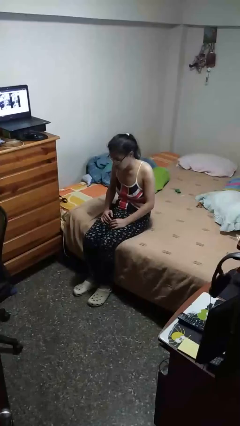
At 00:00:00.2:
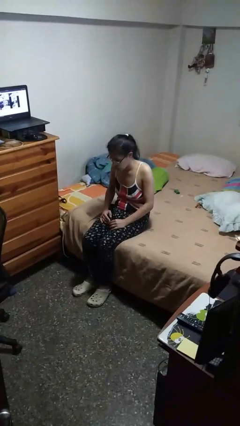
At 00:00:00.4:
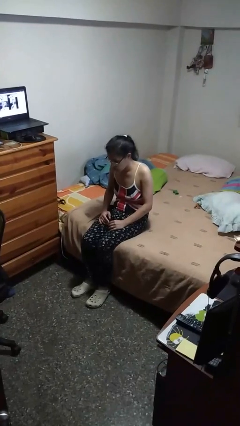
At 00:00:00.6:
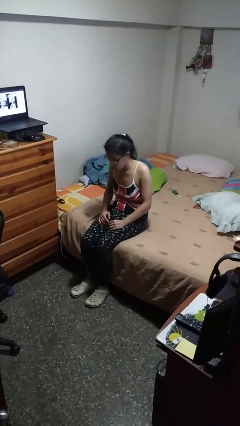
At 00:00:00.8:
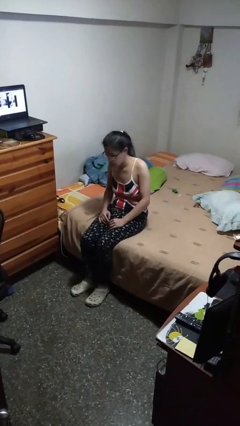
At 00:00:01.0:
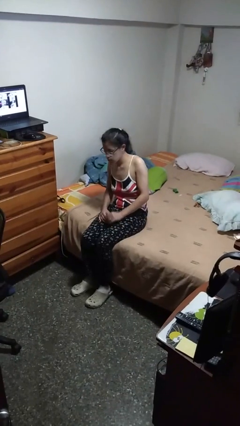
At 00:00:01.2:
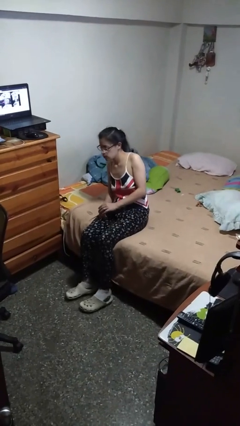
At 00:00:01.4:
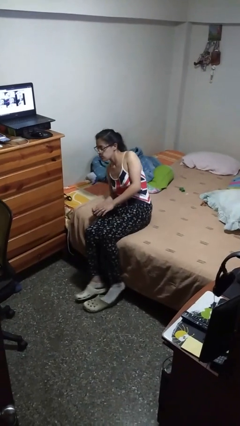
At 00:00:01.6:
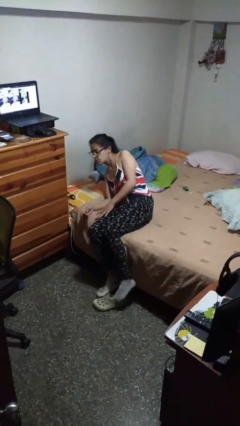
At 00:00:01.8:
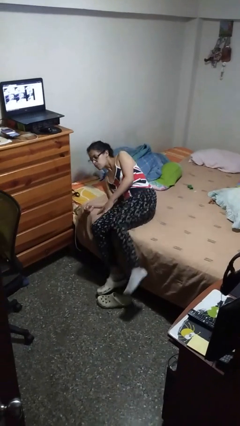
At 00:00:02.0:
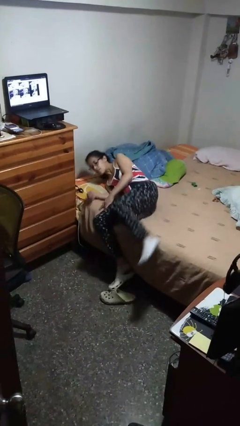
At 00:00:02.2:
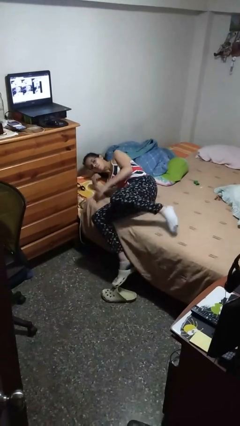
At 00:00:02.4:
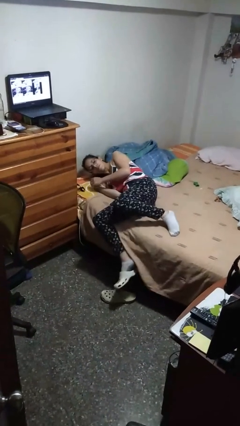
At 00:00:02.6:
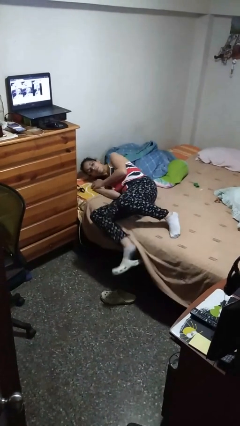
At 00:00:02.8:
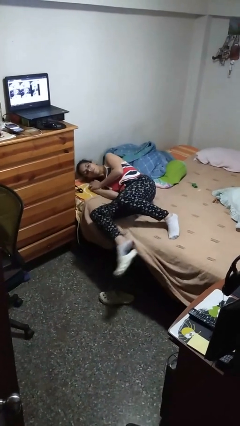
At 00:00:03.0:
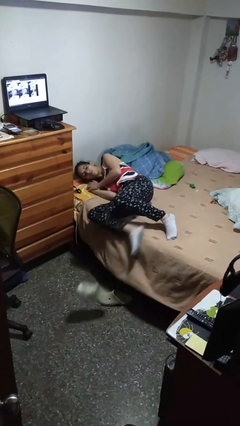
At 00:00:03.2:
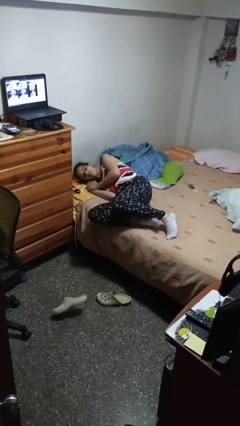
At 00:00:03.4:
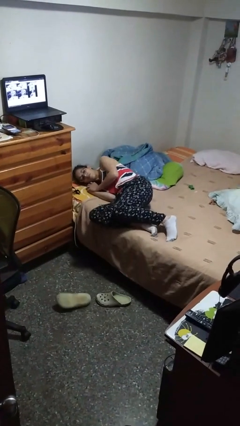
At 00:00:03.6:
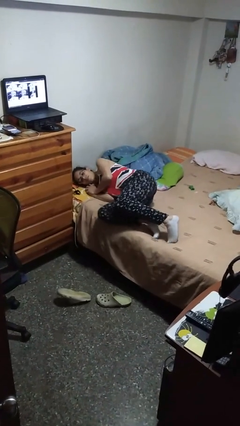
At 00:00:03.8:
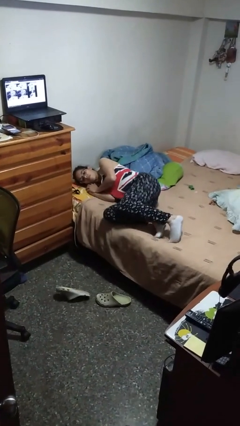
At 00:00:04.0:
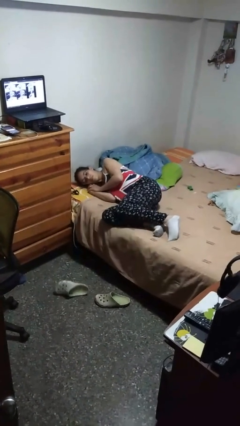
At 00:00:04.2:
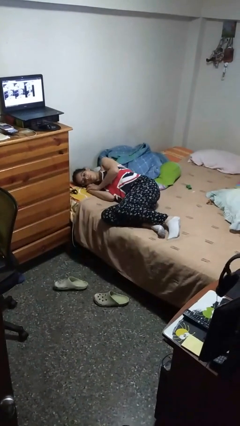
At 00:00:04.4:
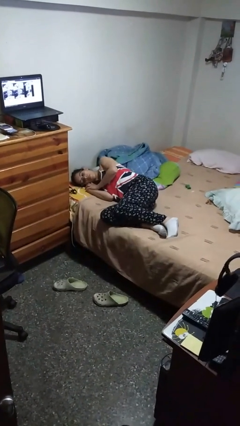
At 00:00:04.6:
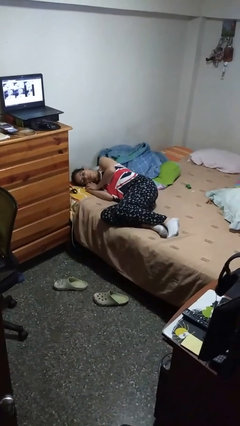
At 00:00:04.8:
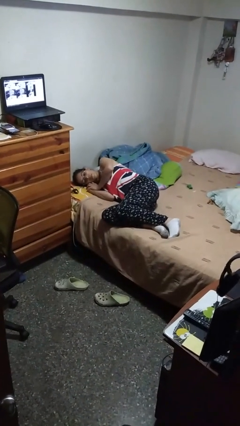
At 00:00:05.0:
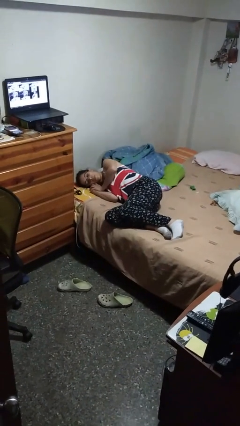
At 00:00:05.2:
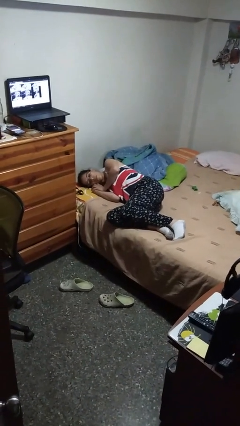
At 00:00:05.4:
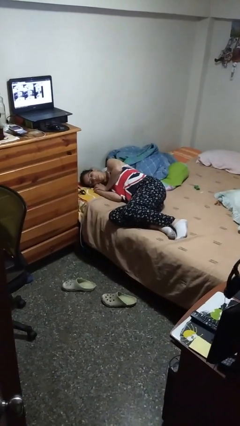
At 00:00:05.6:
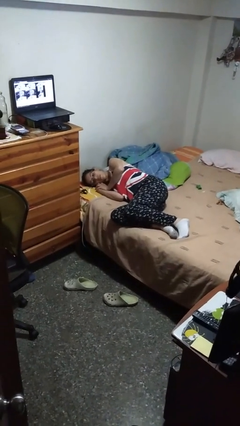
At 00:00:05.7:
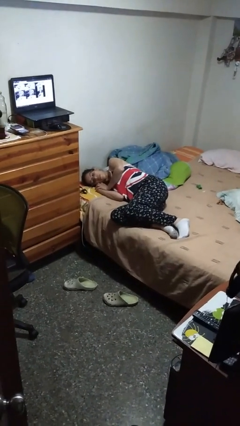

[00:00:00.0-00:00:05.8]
person lies down on bed

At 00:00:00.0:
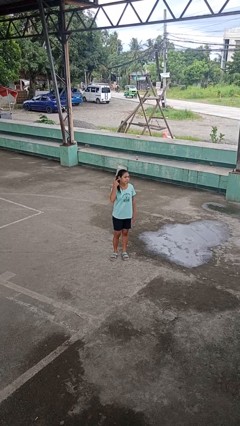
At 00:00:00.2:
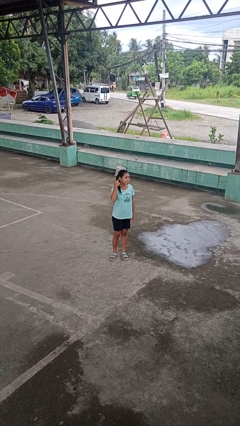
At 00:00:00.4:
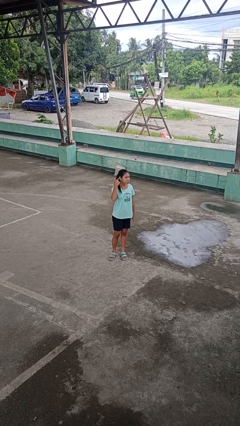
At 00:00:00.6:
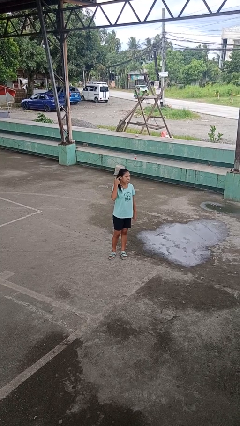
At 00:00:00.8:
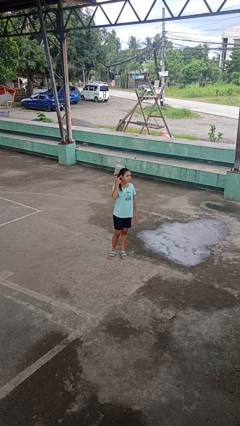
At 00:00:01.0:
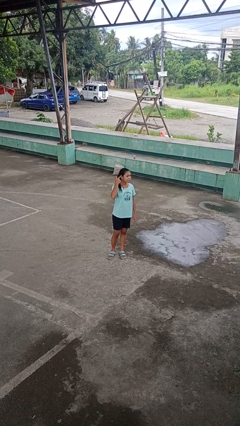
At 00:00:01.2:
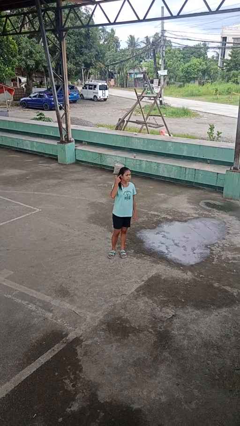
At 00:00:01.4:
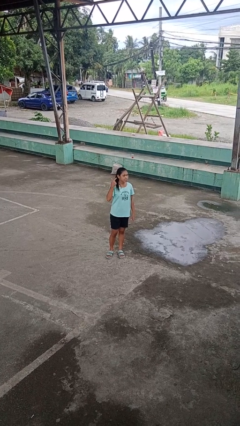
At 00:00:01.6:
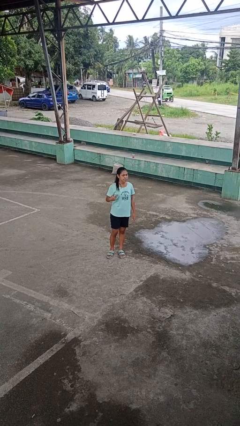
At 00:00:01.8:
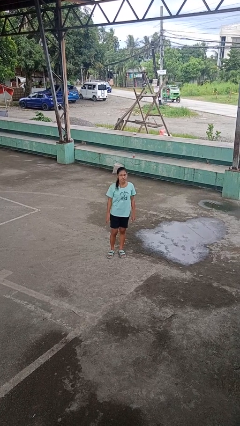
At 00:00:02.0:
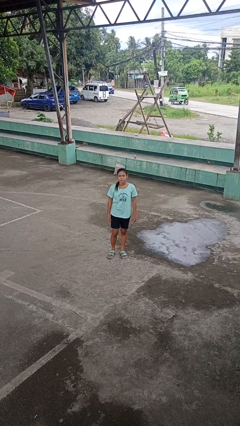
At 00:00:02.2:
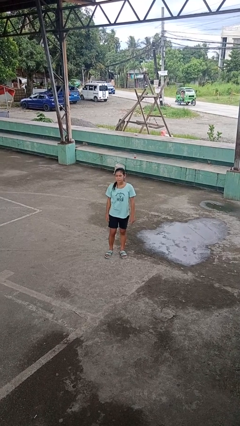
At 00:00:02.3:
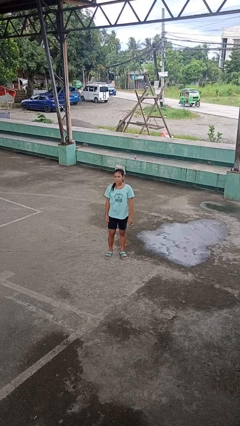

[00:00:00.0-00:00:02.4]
person gestures listen closely

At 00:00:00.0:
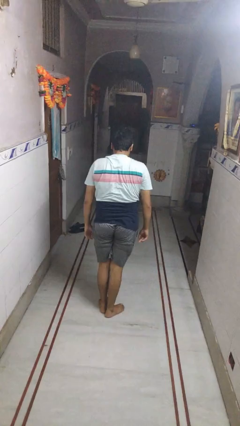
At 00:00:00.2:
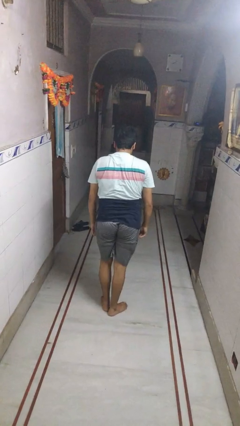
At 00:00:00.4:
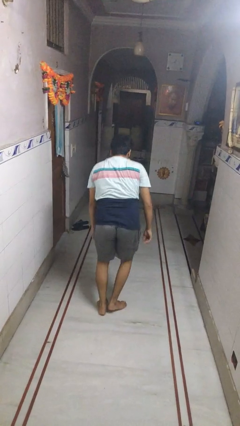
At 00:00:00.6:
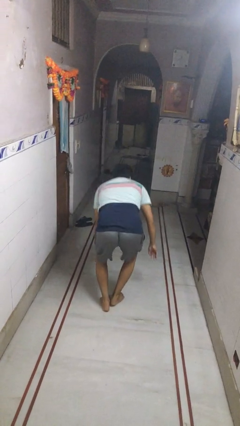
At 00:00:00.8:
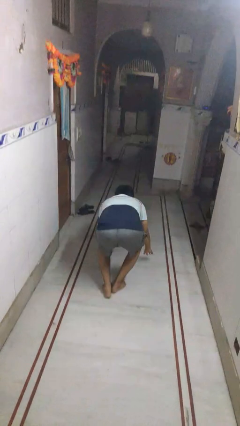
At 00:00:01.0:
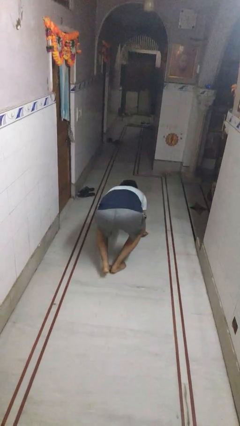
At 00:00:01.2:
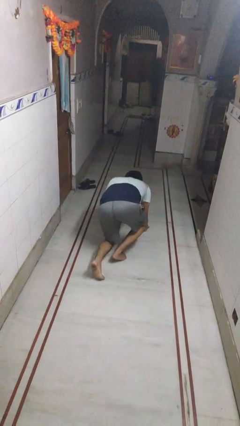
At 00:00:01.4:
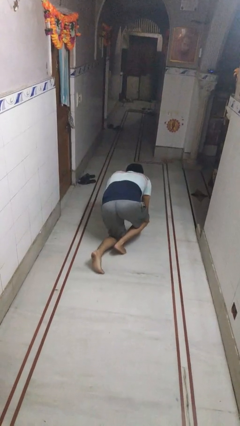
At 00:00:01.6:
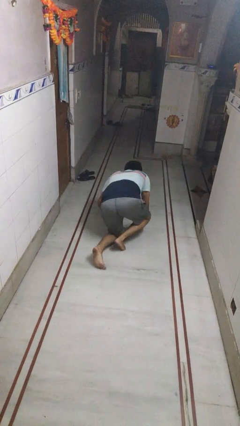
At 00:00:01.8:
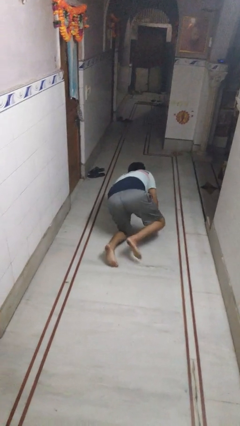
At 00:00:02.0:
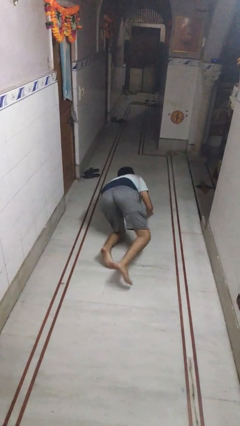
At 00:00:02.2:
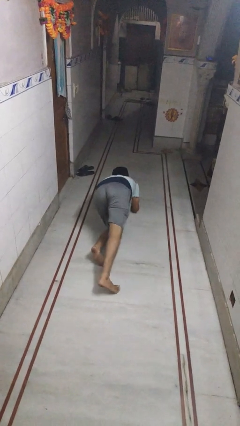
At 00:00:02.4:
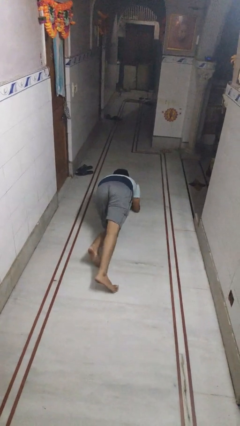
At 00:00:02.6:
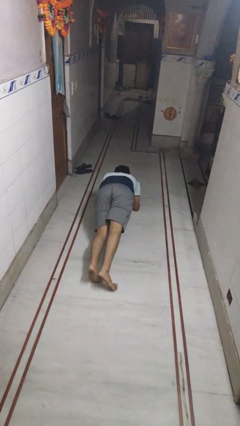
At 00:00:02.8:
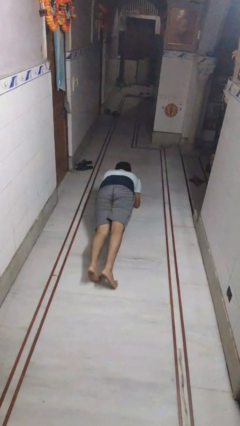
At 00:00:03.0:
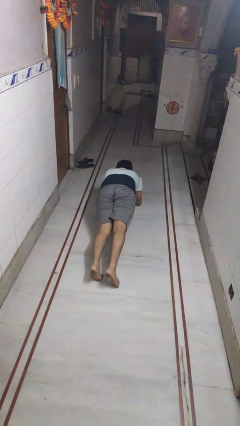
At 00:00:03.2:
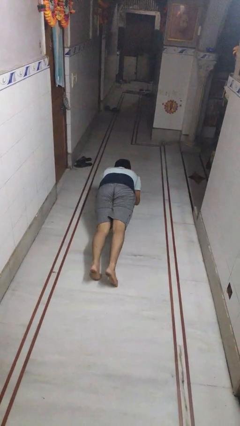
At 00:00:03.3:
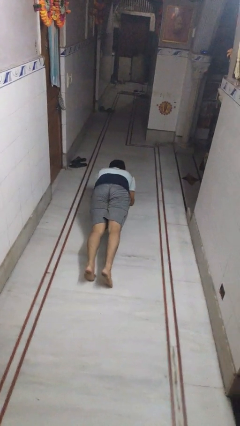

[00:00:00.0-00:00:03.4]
person exercises with plank

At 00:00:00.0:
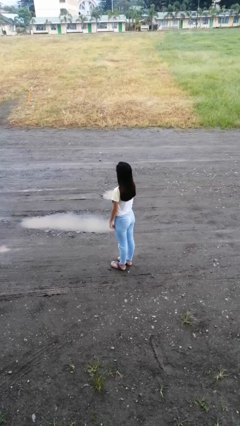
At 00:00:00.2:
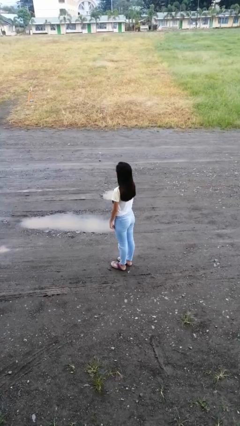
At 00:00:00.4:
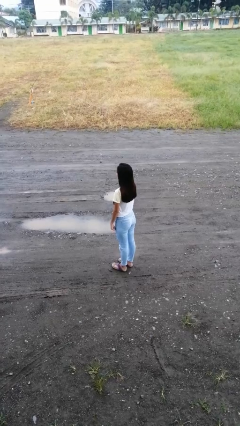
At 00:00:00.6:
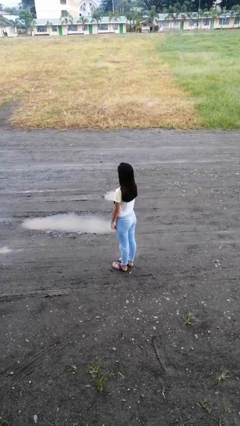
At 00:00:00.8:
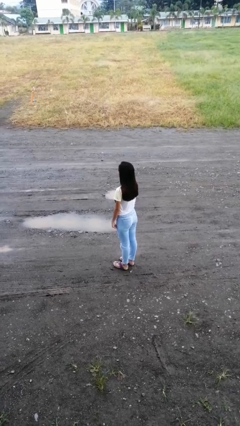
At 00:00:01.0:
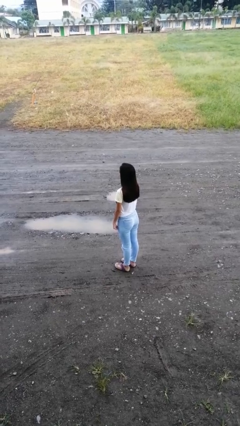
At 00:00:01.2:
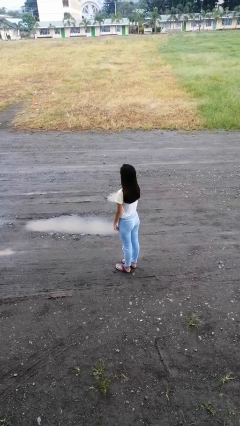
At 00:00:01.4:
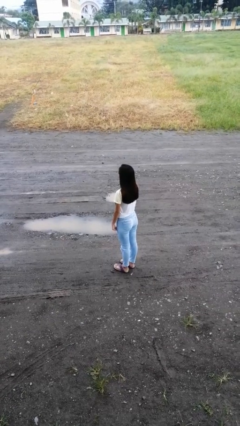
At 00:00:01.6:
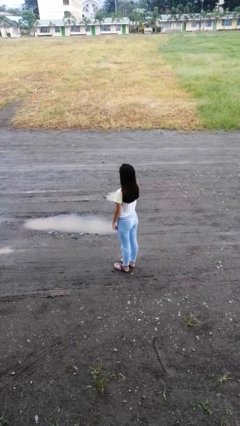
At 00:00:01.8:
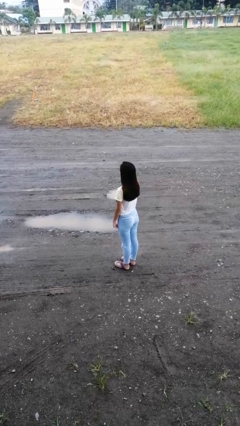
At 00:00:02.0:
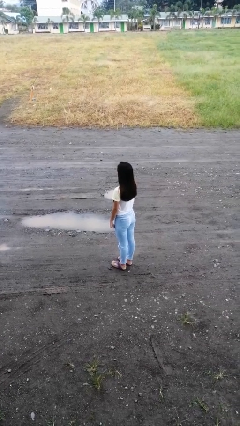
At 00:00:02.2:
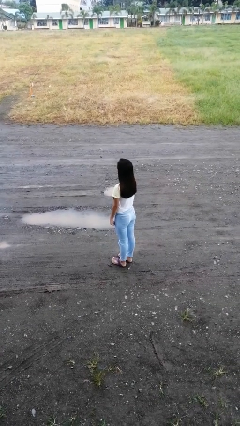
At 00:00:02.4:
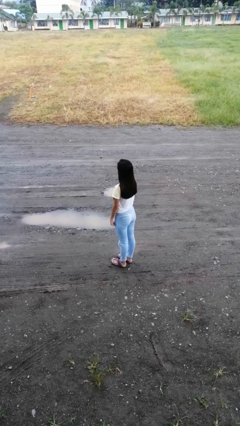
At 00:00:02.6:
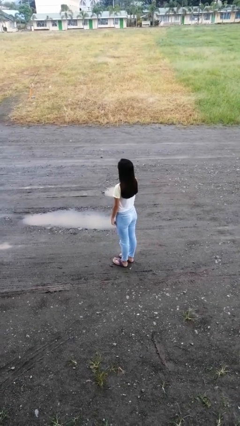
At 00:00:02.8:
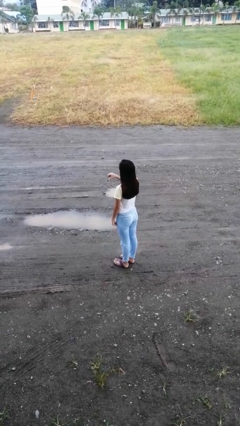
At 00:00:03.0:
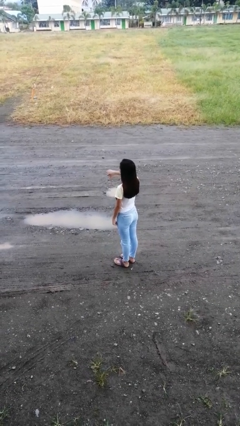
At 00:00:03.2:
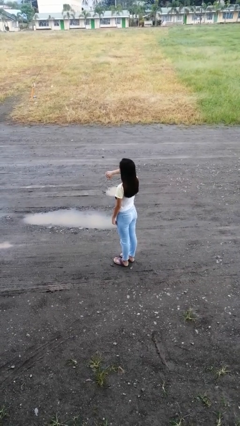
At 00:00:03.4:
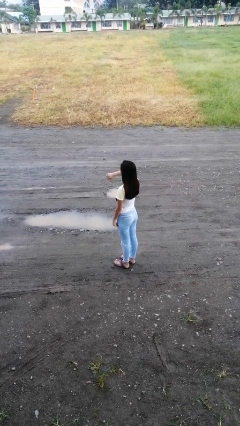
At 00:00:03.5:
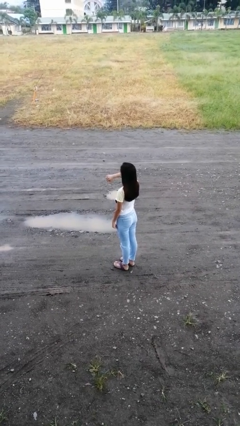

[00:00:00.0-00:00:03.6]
person gestures thumbs down

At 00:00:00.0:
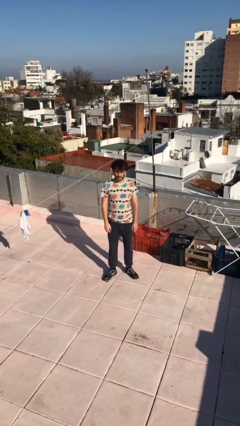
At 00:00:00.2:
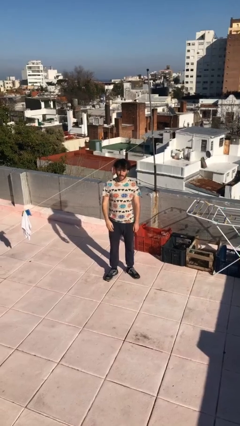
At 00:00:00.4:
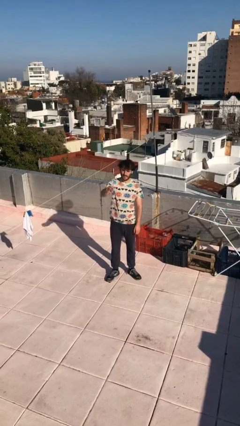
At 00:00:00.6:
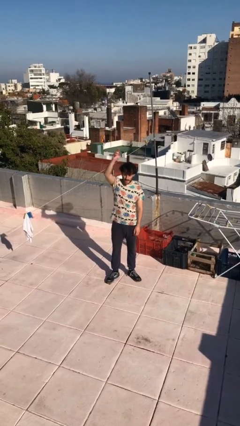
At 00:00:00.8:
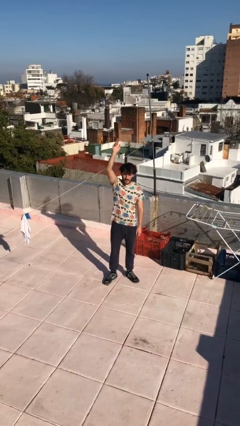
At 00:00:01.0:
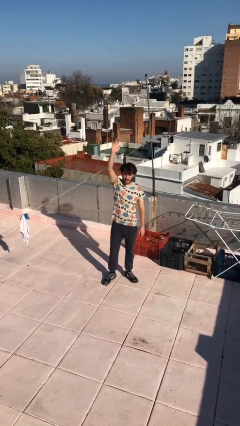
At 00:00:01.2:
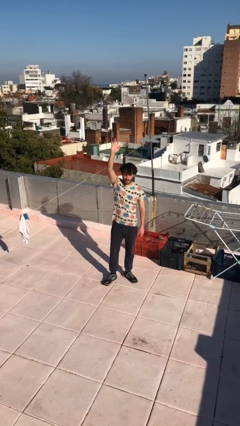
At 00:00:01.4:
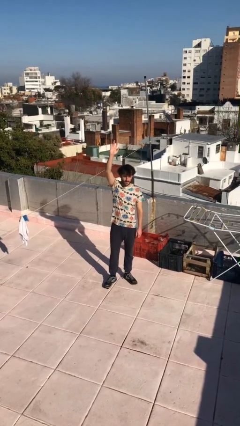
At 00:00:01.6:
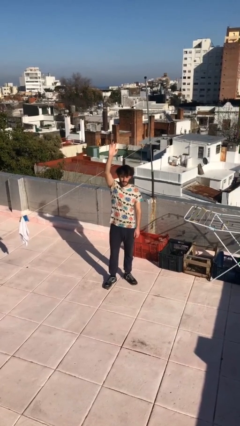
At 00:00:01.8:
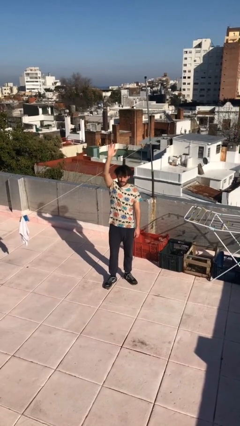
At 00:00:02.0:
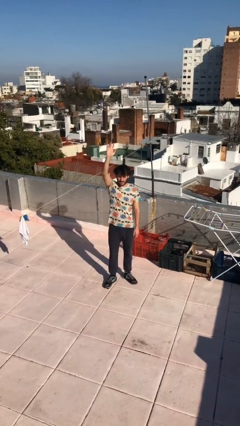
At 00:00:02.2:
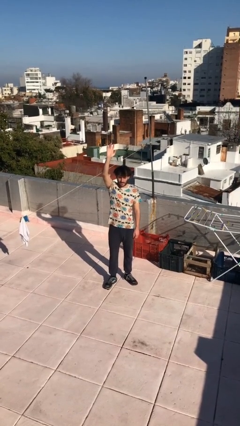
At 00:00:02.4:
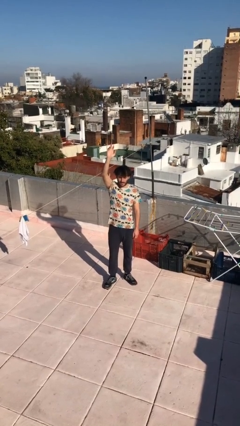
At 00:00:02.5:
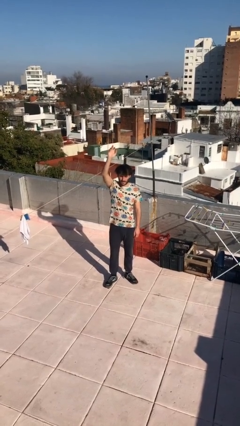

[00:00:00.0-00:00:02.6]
person gestures raise hand
